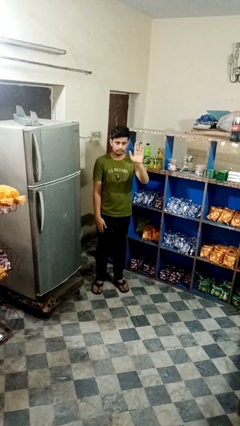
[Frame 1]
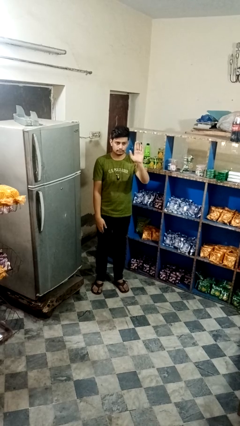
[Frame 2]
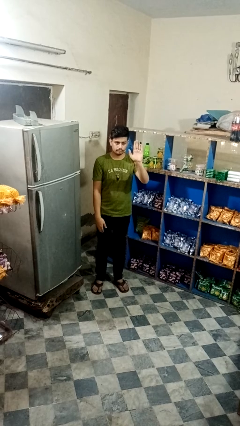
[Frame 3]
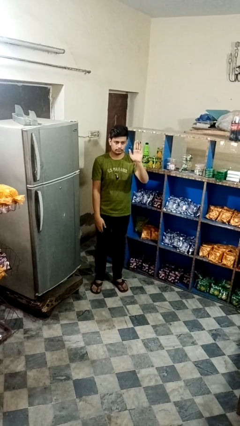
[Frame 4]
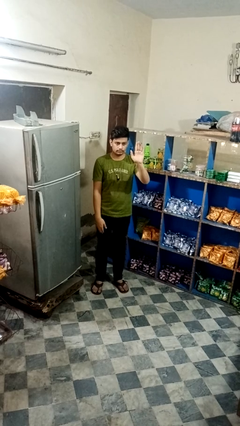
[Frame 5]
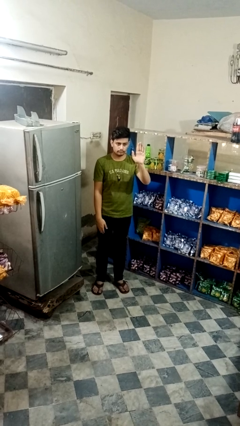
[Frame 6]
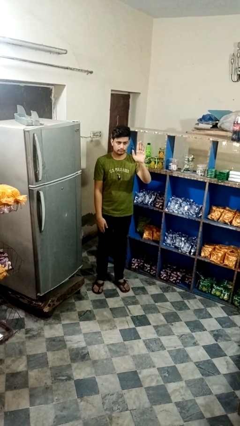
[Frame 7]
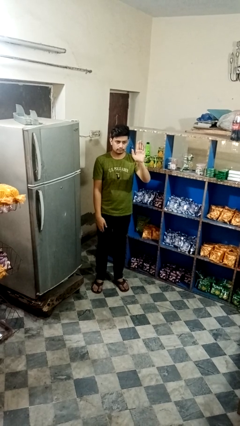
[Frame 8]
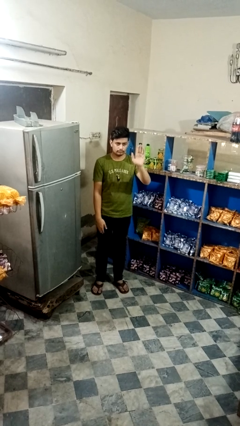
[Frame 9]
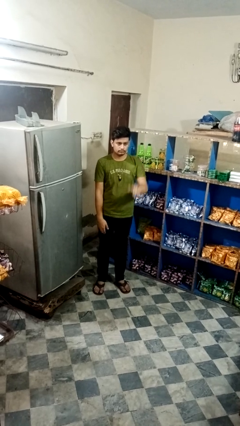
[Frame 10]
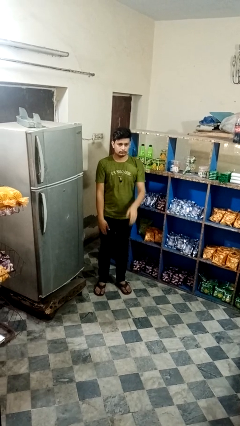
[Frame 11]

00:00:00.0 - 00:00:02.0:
person gestures stop

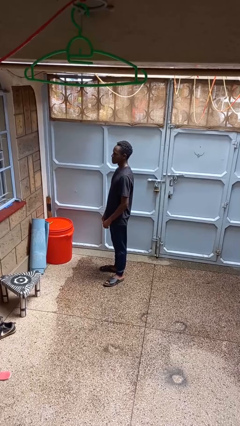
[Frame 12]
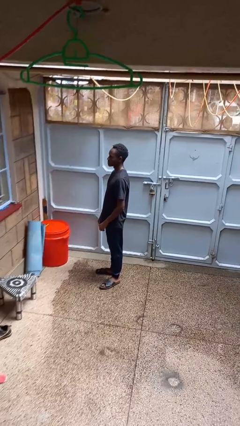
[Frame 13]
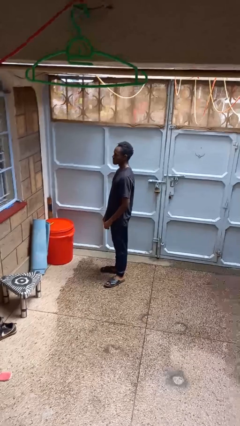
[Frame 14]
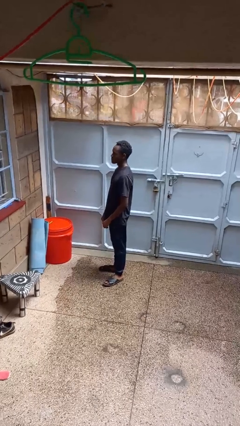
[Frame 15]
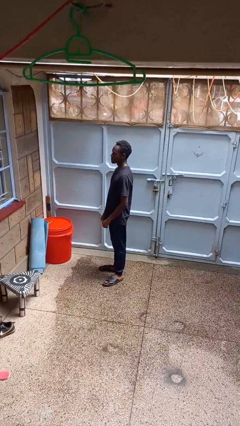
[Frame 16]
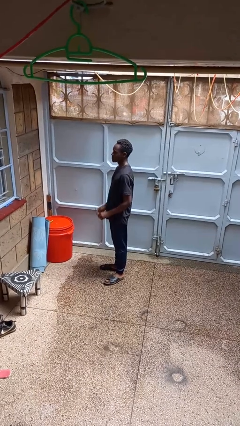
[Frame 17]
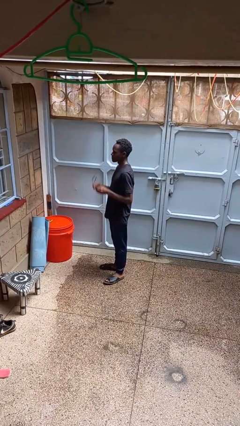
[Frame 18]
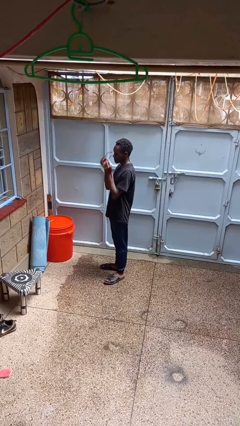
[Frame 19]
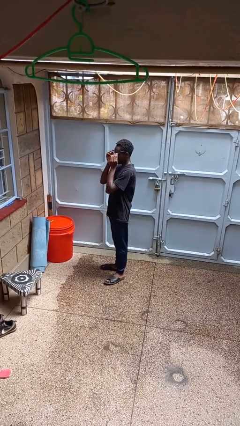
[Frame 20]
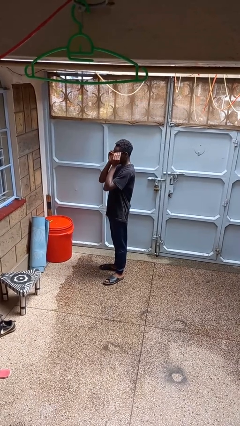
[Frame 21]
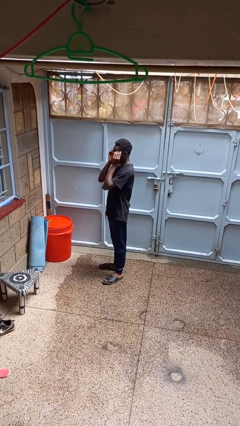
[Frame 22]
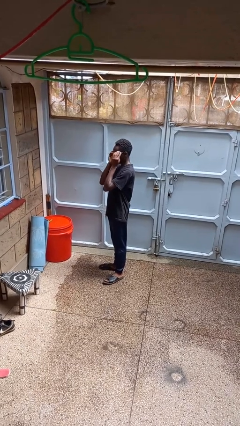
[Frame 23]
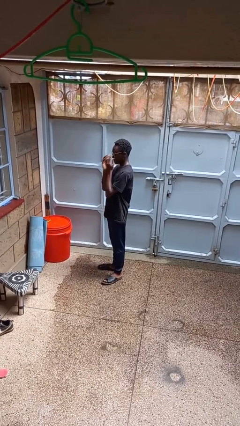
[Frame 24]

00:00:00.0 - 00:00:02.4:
person puts on glasses

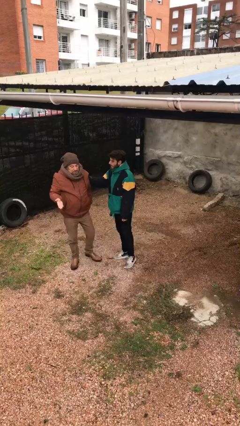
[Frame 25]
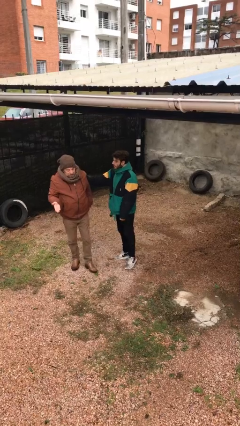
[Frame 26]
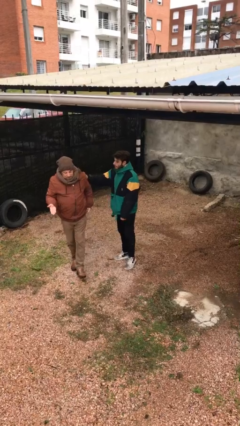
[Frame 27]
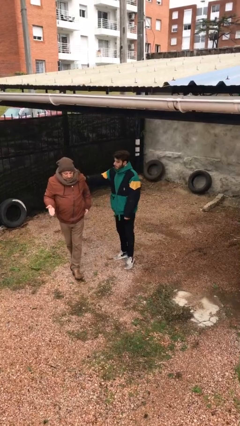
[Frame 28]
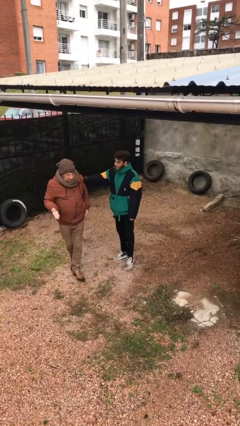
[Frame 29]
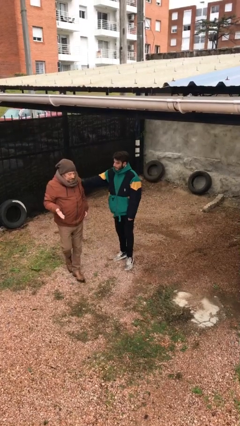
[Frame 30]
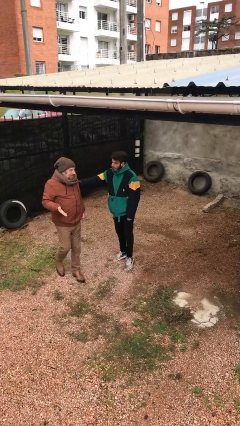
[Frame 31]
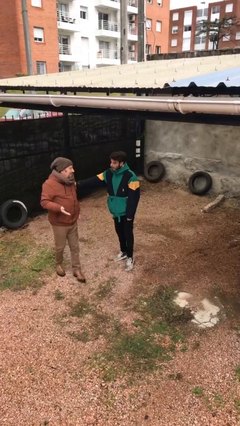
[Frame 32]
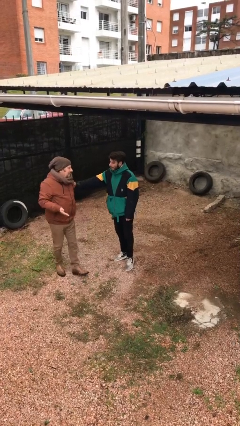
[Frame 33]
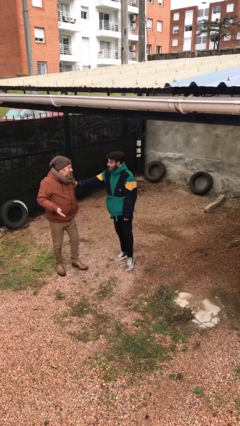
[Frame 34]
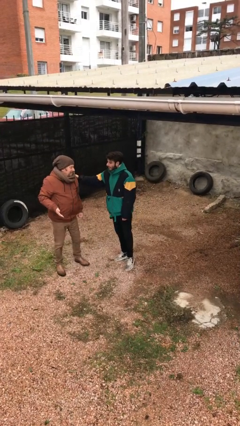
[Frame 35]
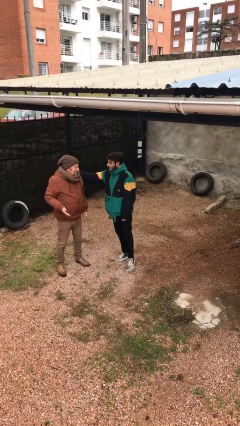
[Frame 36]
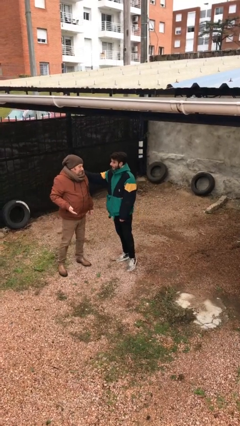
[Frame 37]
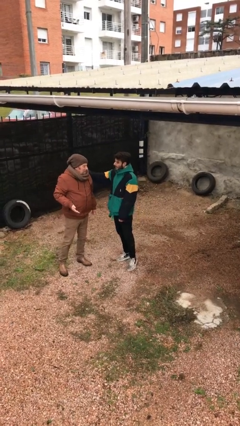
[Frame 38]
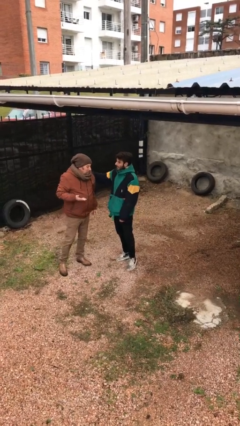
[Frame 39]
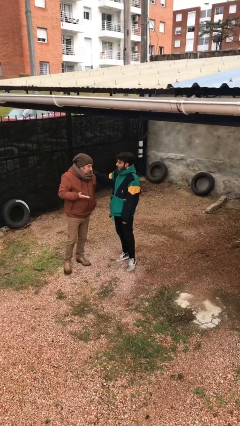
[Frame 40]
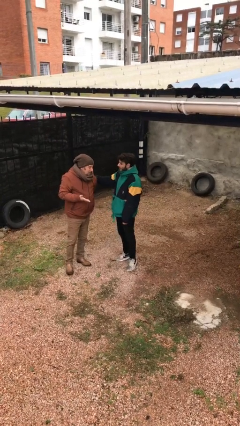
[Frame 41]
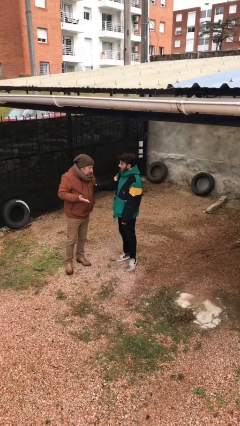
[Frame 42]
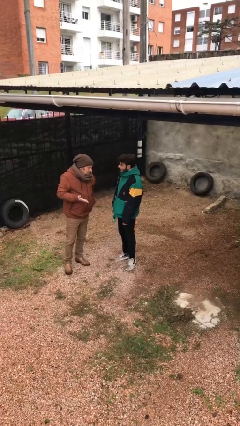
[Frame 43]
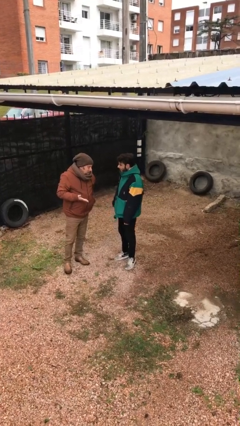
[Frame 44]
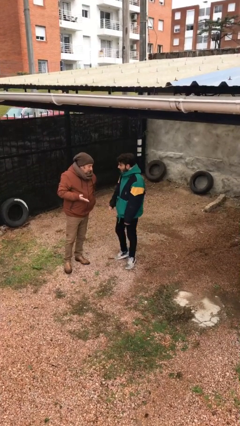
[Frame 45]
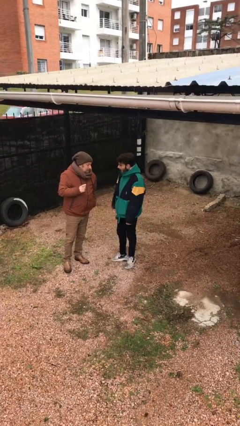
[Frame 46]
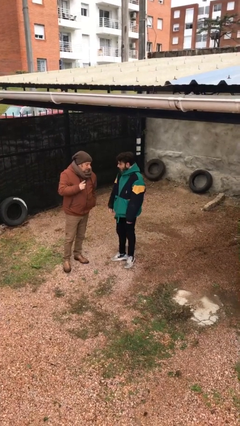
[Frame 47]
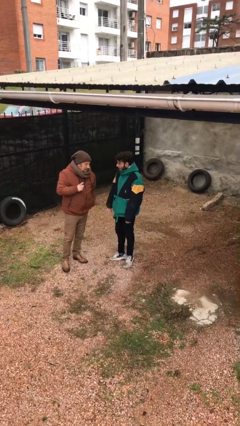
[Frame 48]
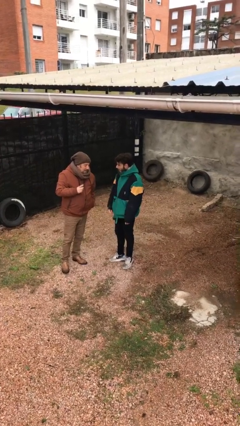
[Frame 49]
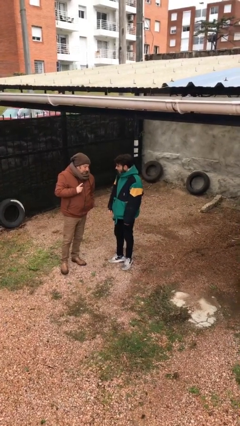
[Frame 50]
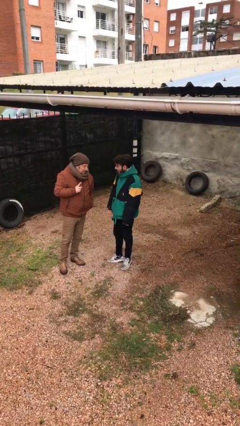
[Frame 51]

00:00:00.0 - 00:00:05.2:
person talks to person

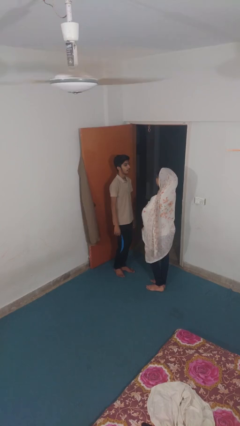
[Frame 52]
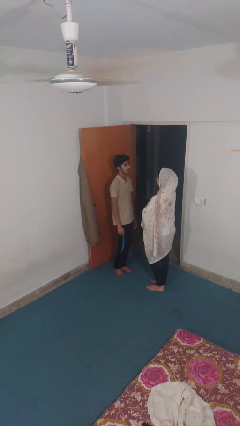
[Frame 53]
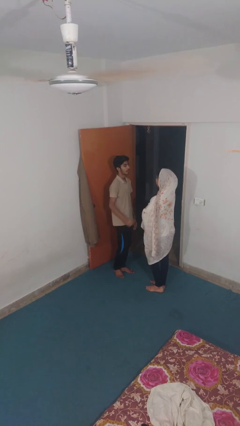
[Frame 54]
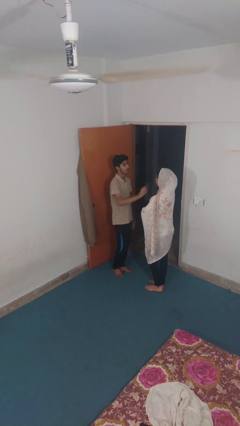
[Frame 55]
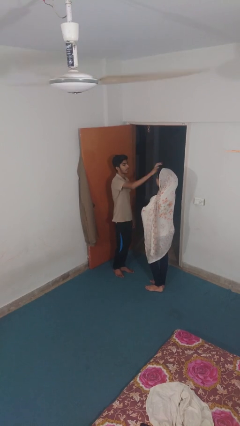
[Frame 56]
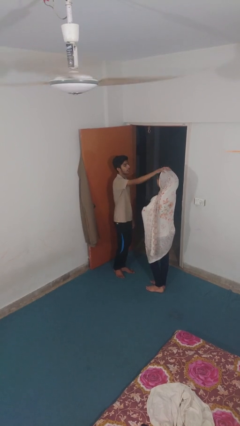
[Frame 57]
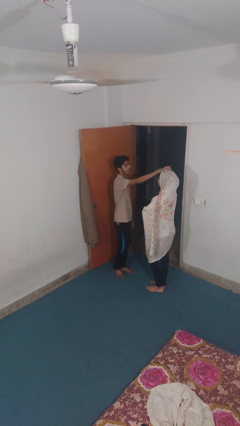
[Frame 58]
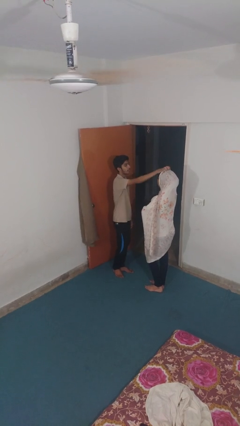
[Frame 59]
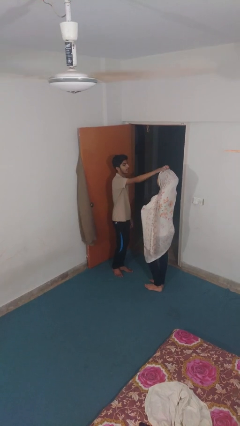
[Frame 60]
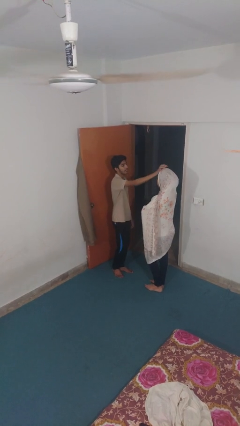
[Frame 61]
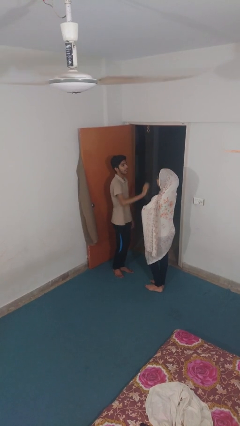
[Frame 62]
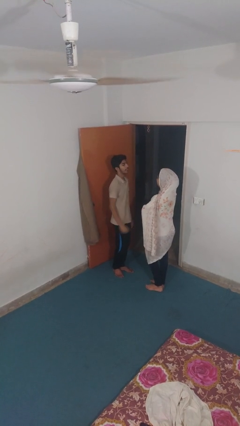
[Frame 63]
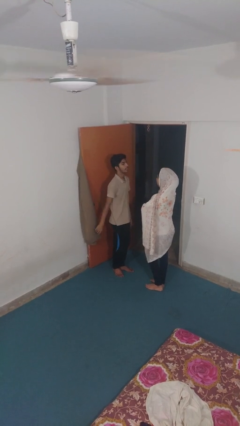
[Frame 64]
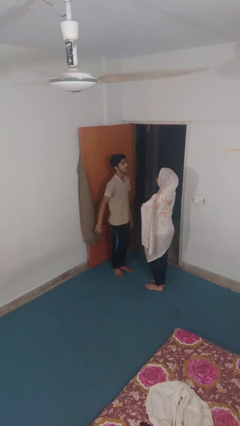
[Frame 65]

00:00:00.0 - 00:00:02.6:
person grabs person by hair

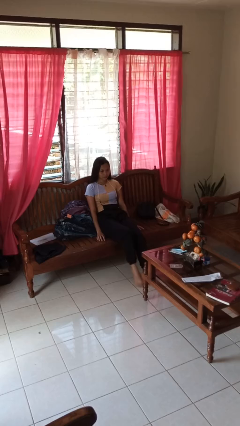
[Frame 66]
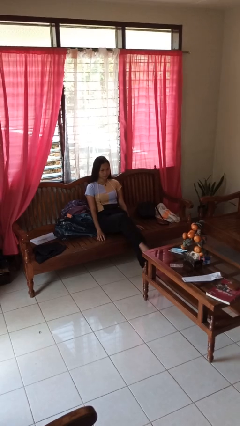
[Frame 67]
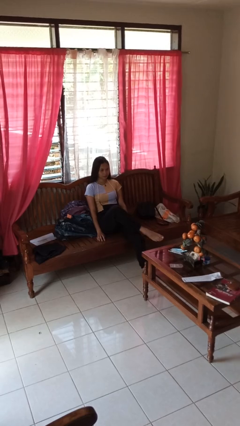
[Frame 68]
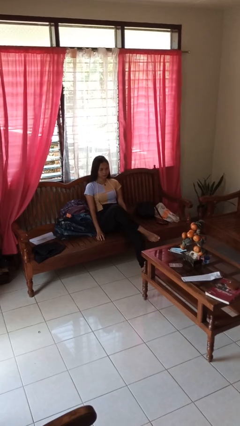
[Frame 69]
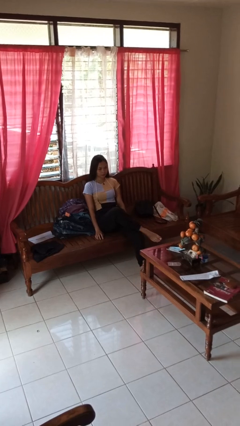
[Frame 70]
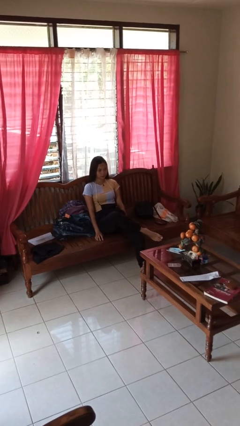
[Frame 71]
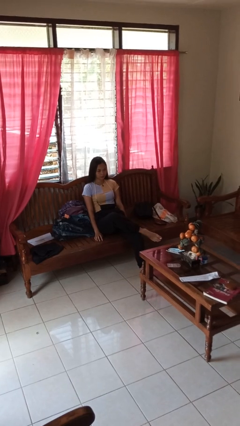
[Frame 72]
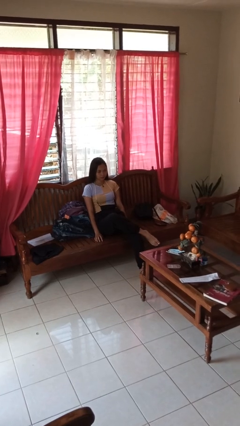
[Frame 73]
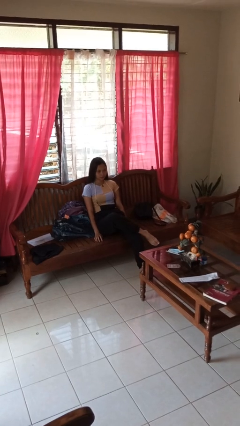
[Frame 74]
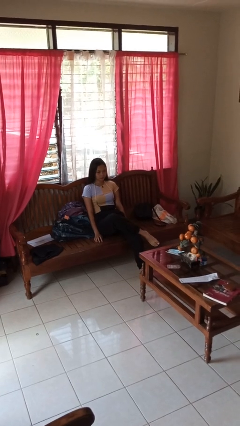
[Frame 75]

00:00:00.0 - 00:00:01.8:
person crosses legs

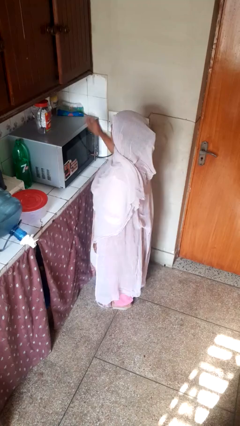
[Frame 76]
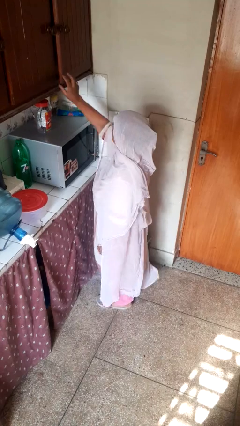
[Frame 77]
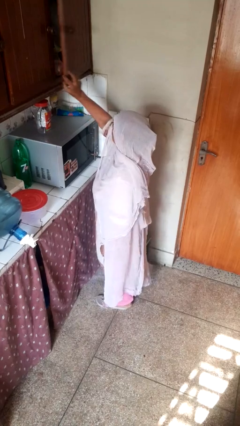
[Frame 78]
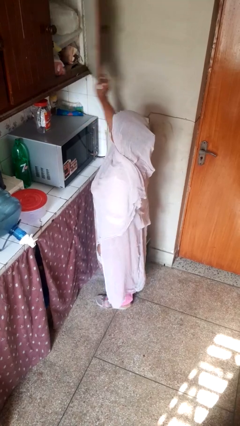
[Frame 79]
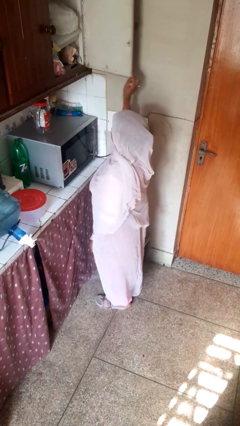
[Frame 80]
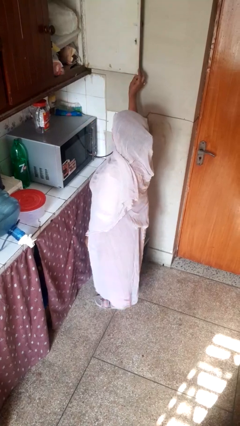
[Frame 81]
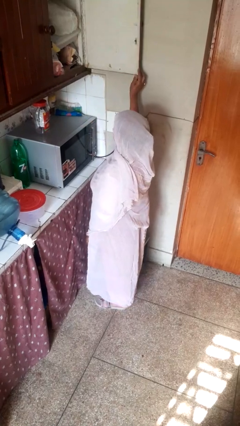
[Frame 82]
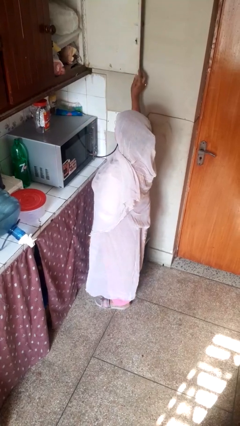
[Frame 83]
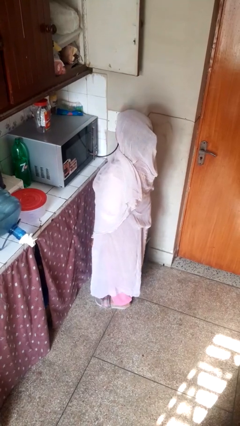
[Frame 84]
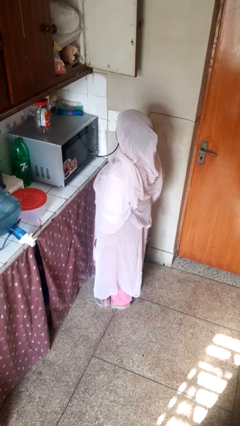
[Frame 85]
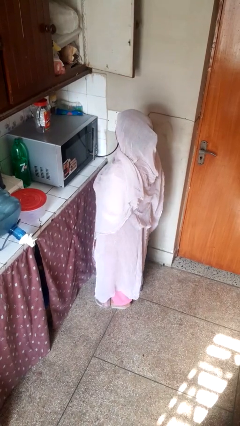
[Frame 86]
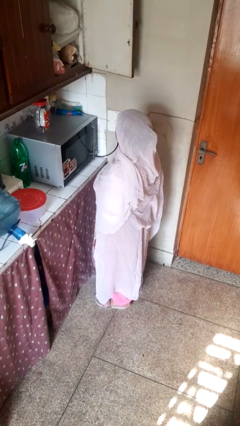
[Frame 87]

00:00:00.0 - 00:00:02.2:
person opens cabinet

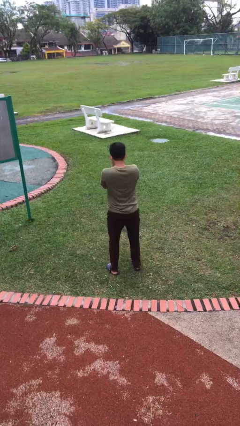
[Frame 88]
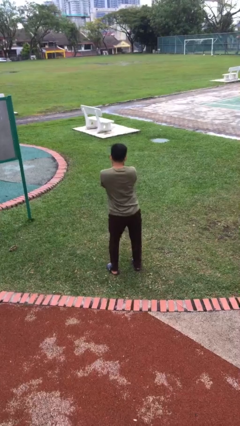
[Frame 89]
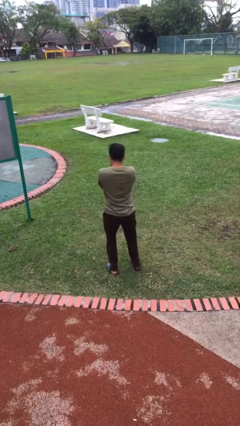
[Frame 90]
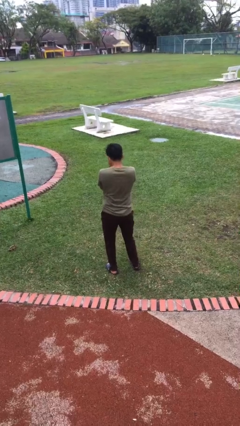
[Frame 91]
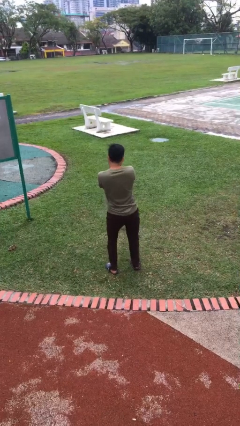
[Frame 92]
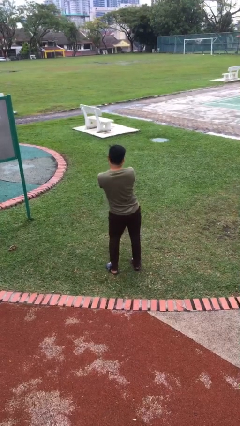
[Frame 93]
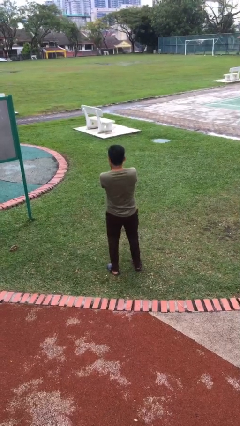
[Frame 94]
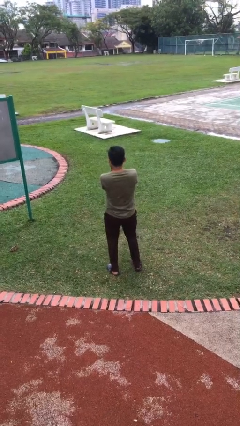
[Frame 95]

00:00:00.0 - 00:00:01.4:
person wiggles hips
